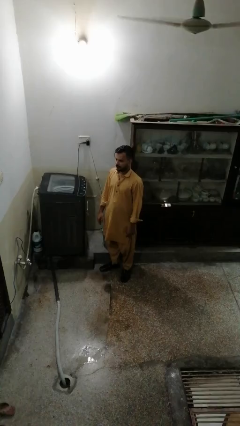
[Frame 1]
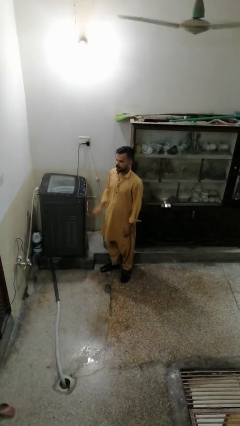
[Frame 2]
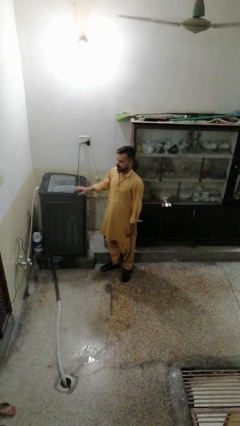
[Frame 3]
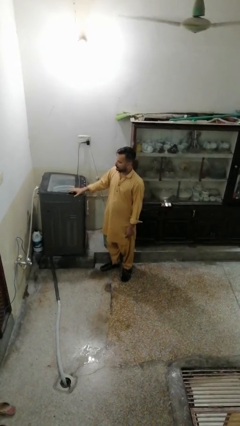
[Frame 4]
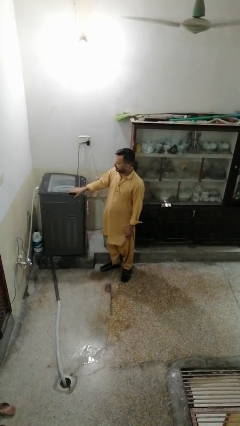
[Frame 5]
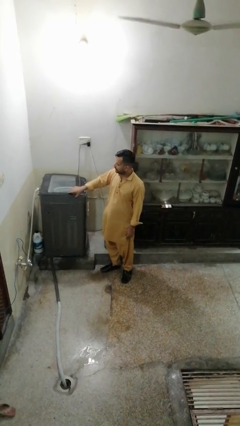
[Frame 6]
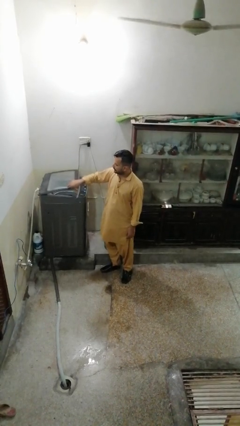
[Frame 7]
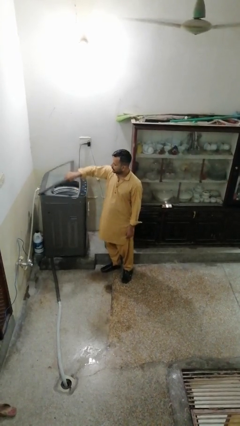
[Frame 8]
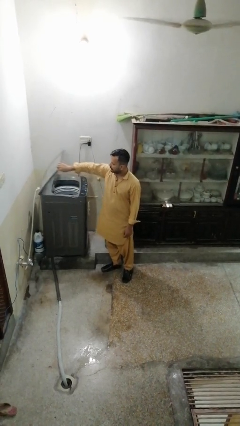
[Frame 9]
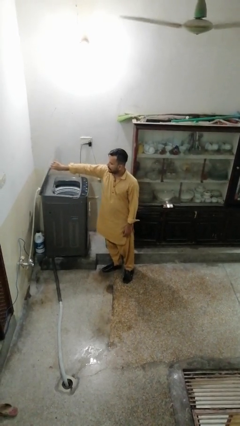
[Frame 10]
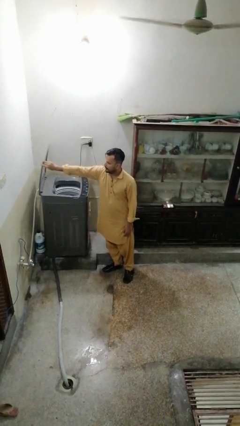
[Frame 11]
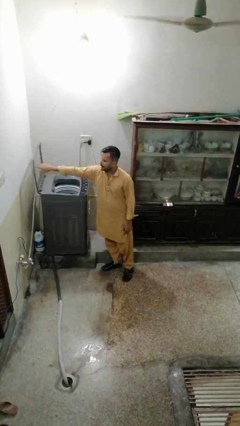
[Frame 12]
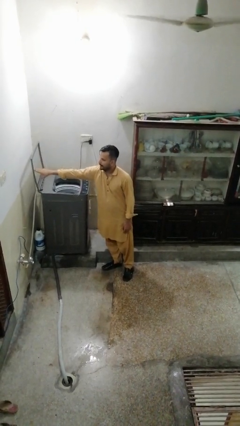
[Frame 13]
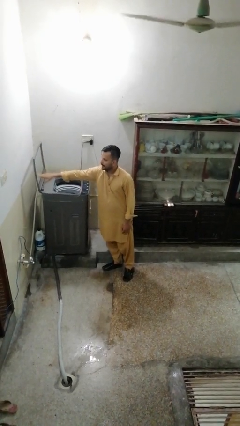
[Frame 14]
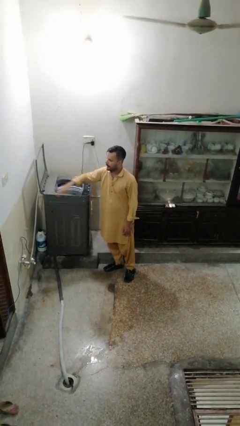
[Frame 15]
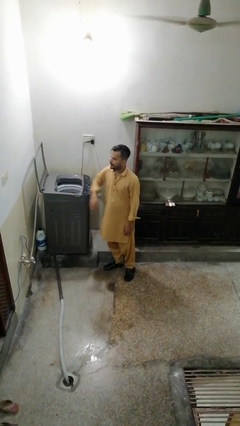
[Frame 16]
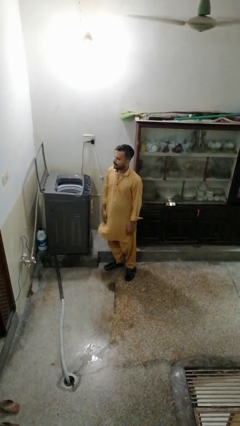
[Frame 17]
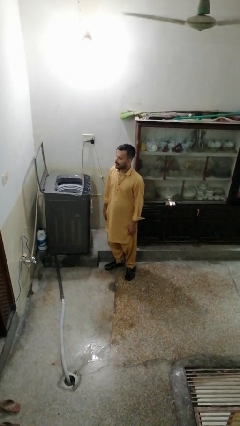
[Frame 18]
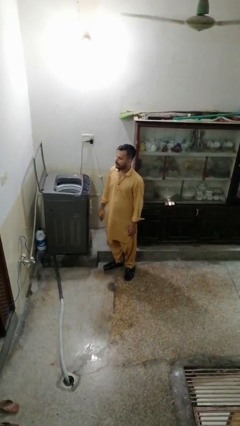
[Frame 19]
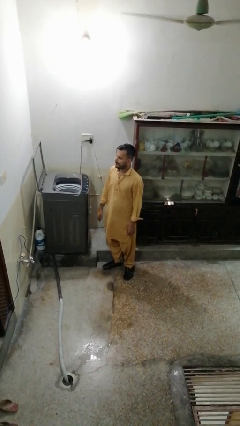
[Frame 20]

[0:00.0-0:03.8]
person opens clothes washer

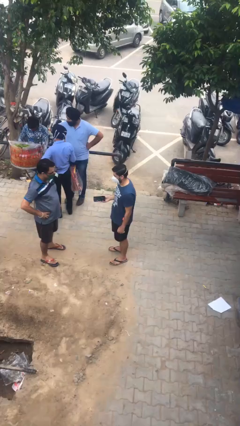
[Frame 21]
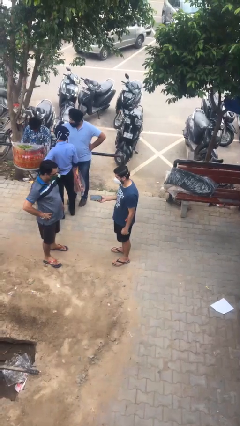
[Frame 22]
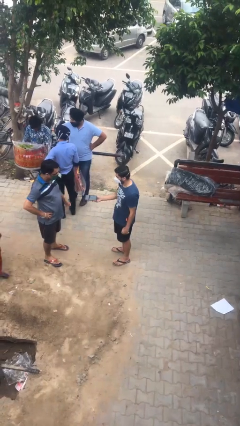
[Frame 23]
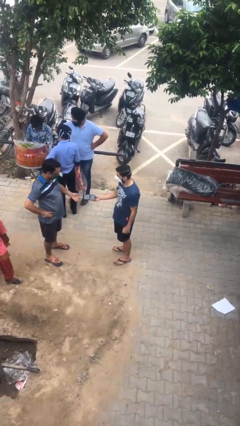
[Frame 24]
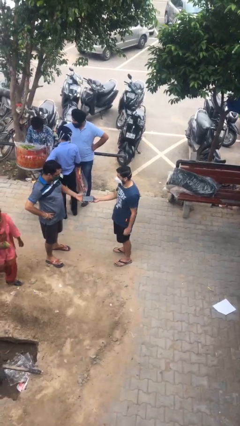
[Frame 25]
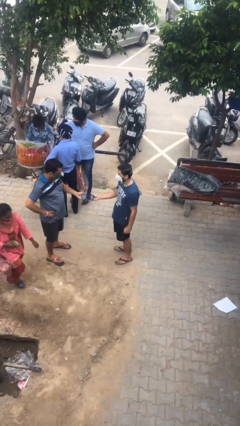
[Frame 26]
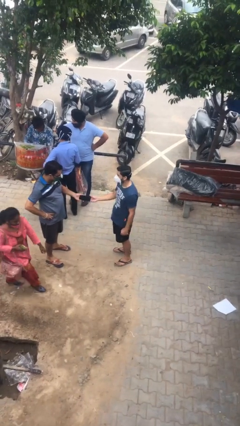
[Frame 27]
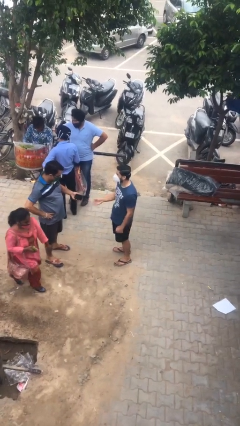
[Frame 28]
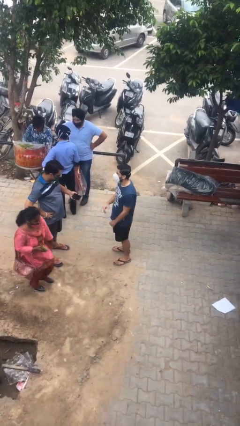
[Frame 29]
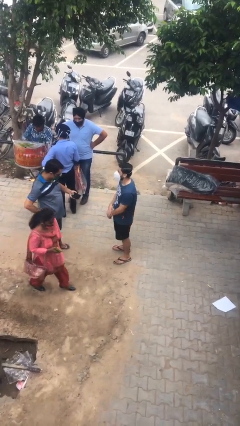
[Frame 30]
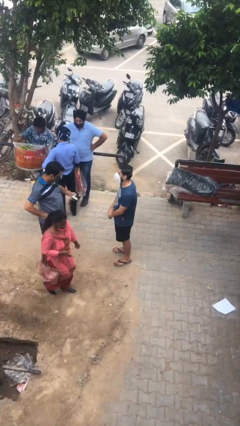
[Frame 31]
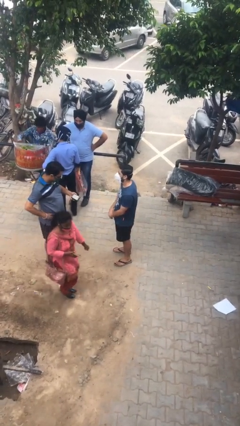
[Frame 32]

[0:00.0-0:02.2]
person transfers object to person

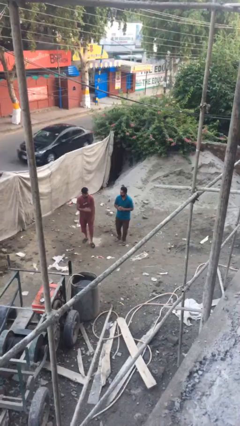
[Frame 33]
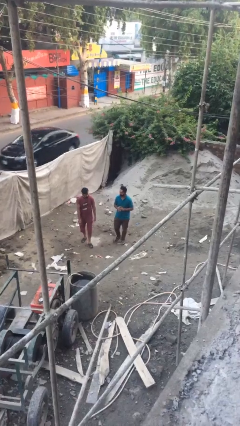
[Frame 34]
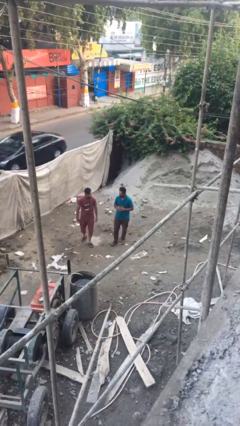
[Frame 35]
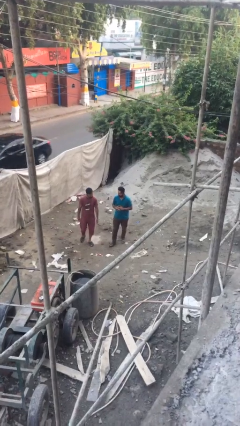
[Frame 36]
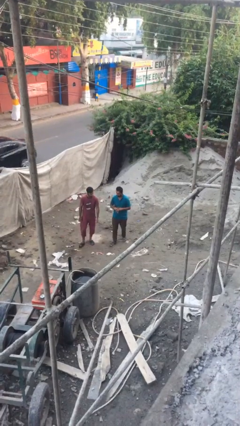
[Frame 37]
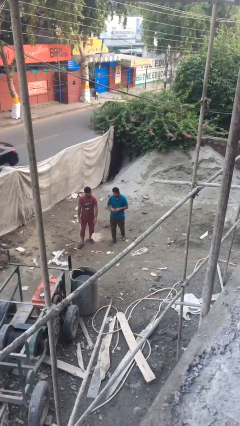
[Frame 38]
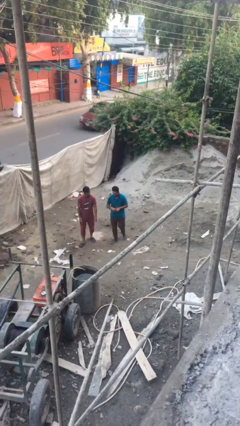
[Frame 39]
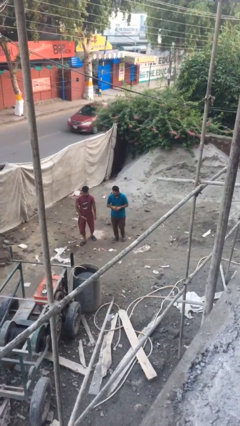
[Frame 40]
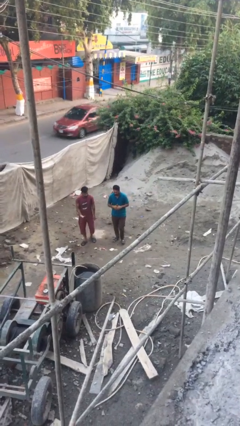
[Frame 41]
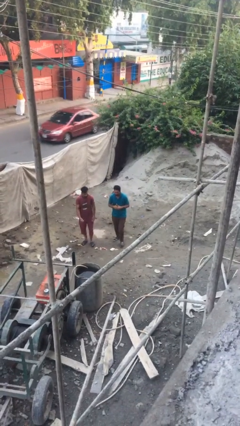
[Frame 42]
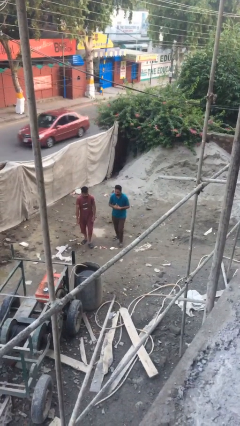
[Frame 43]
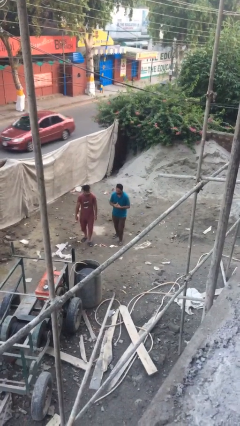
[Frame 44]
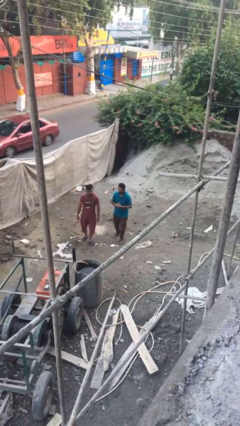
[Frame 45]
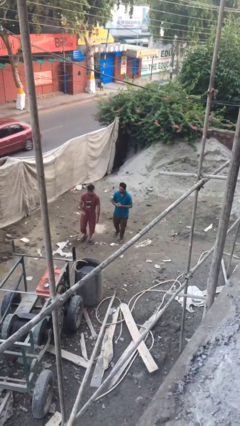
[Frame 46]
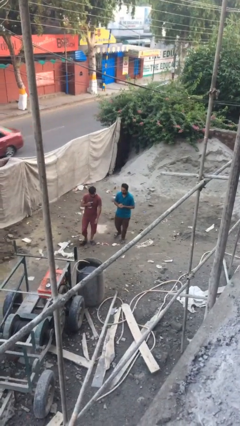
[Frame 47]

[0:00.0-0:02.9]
person talks to person

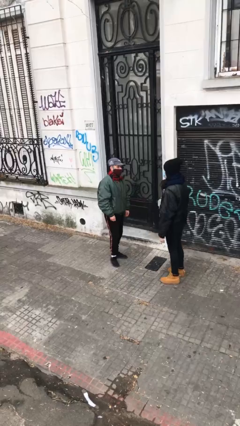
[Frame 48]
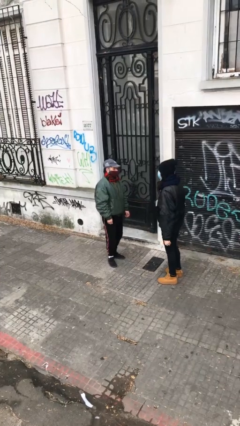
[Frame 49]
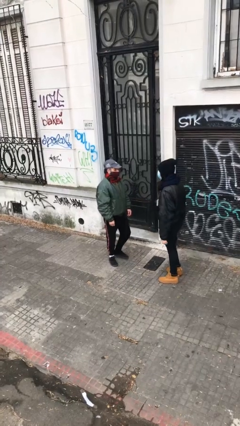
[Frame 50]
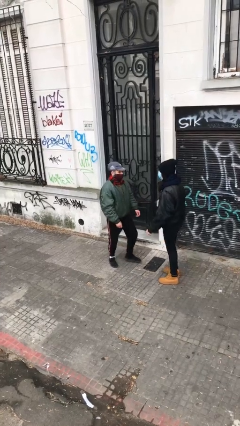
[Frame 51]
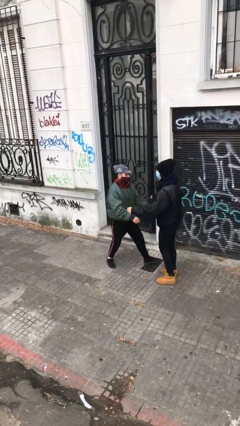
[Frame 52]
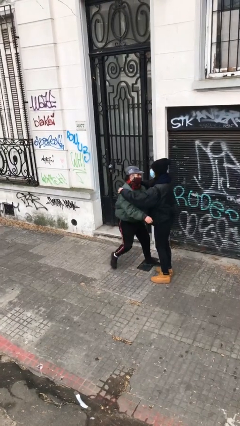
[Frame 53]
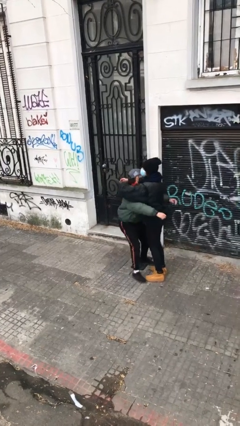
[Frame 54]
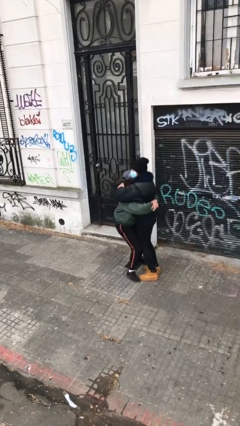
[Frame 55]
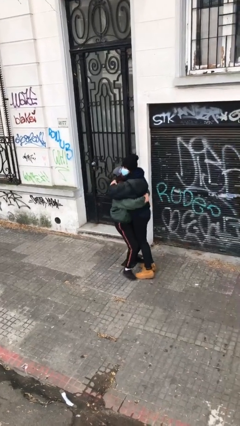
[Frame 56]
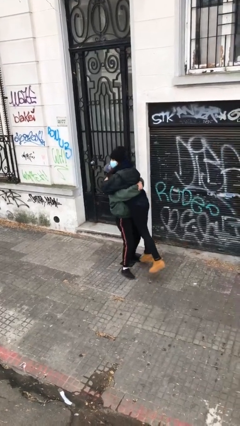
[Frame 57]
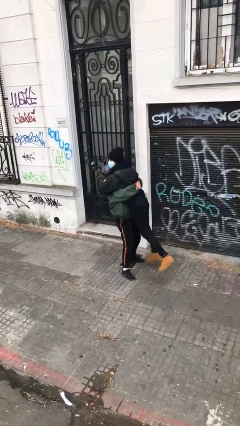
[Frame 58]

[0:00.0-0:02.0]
person picks up person

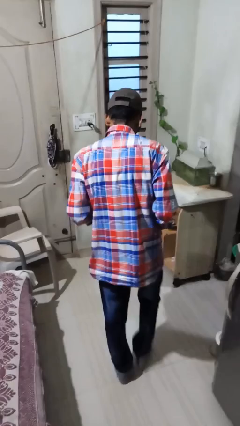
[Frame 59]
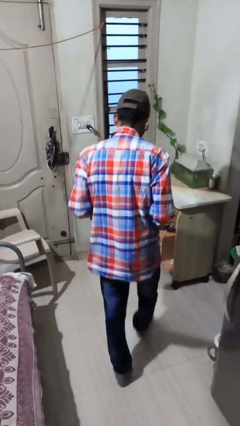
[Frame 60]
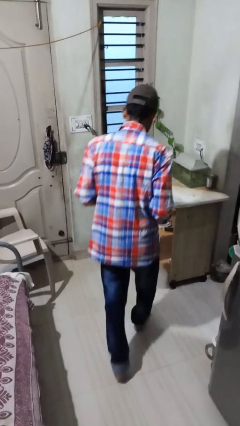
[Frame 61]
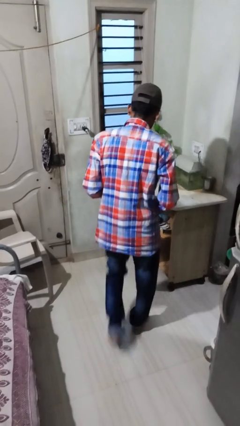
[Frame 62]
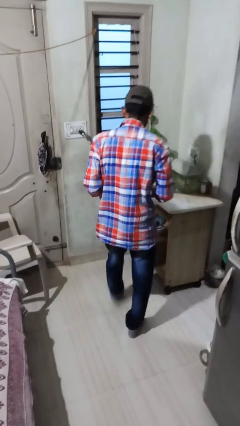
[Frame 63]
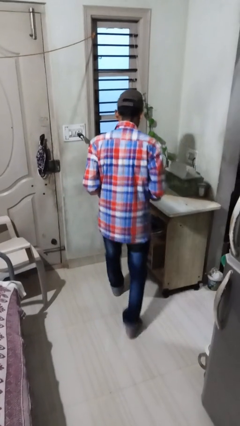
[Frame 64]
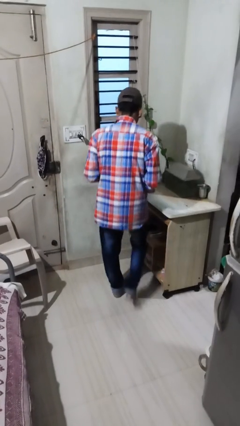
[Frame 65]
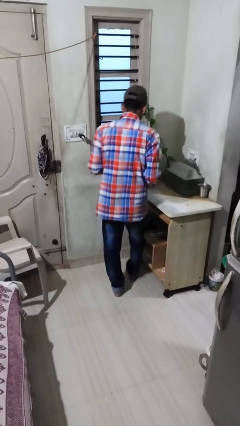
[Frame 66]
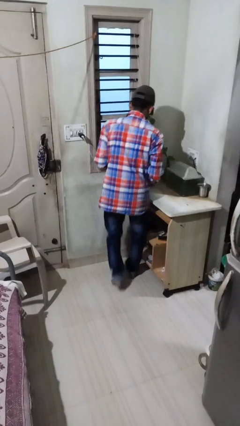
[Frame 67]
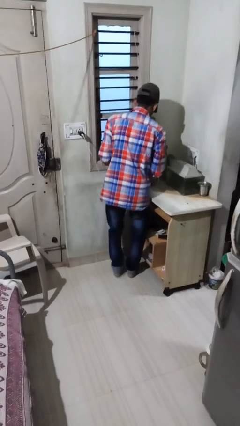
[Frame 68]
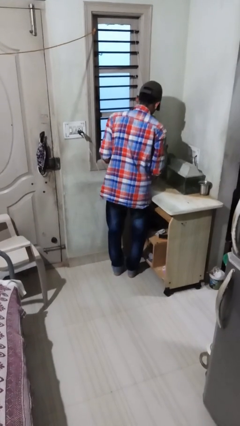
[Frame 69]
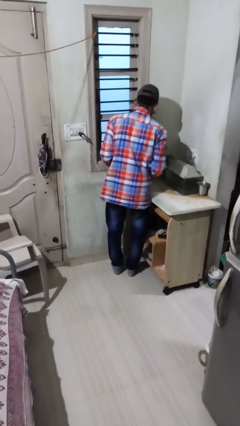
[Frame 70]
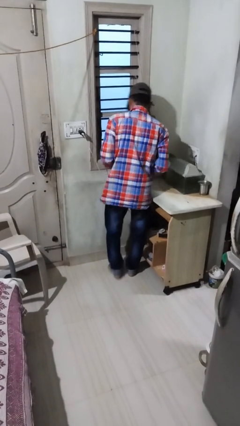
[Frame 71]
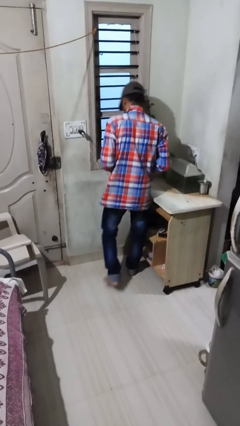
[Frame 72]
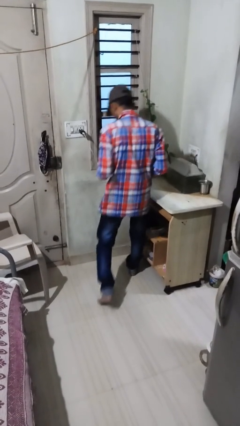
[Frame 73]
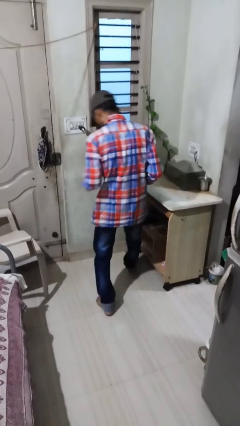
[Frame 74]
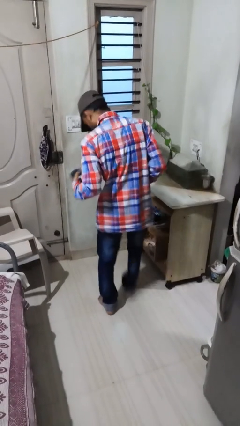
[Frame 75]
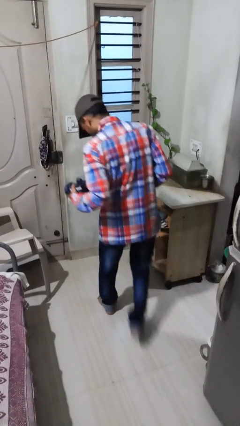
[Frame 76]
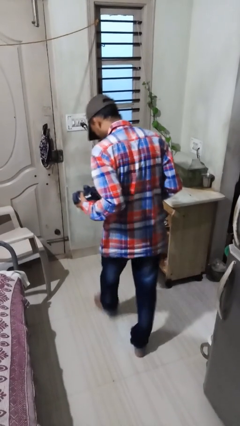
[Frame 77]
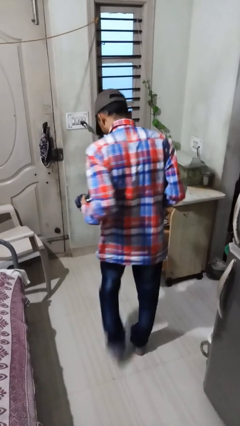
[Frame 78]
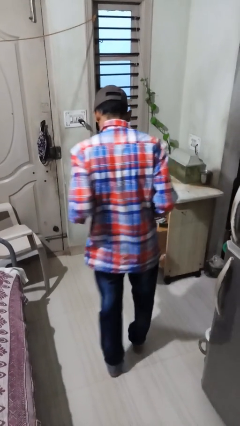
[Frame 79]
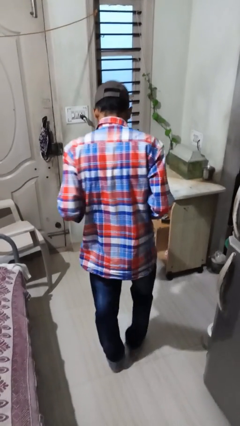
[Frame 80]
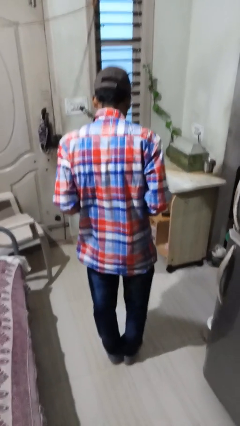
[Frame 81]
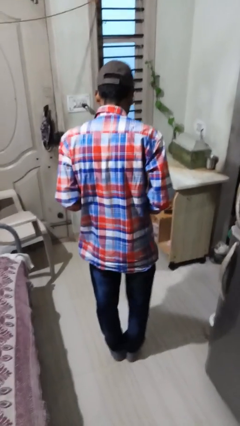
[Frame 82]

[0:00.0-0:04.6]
person picks up object from table

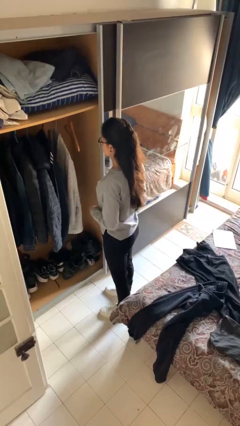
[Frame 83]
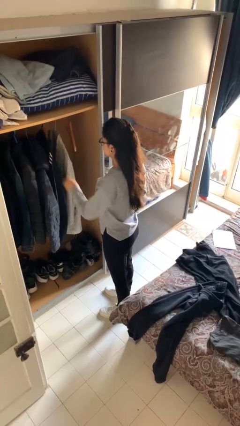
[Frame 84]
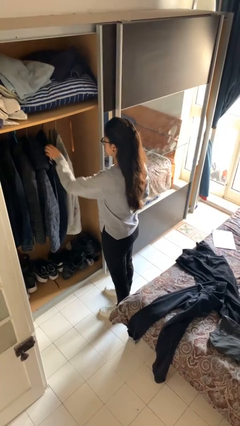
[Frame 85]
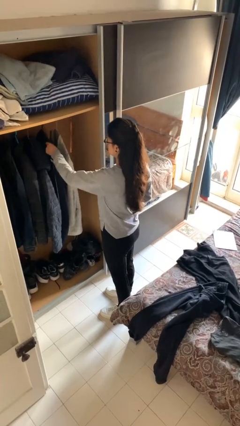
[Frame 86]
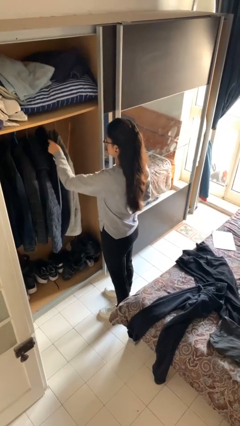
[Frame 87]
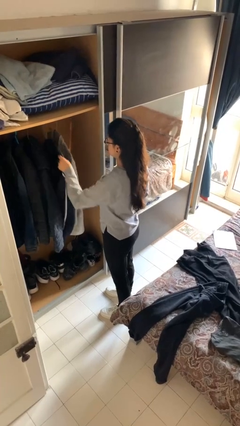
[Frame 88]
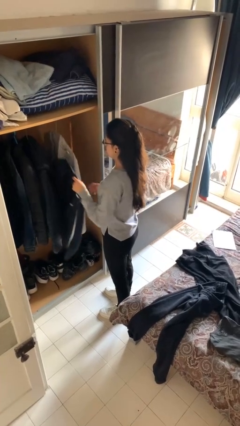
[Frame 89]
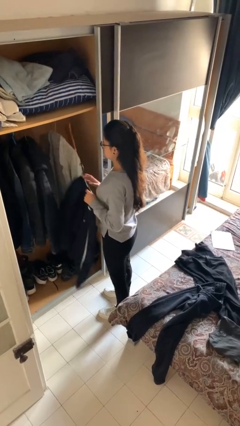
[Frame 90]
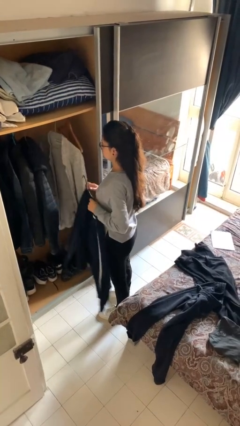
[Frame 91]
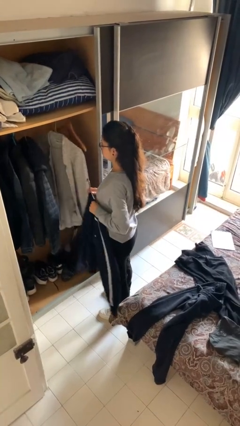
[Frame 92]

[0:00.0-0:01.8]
person takes clothes from closet

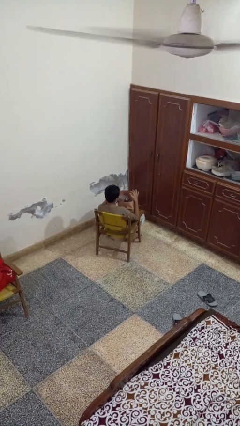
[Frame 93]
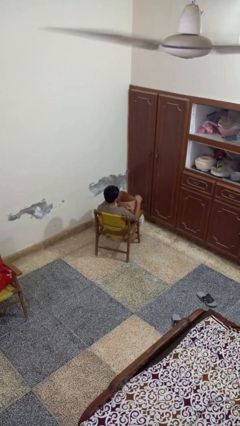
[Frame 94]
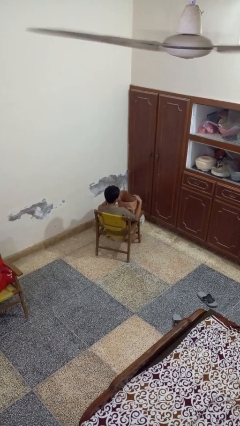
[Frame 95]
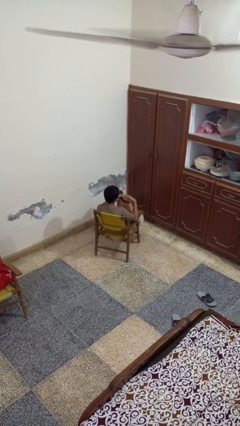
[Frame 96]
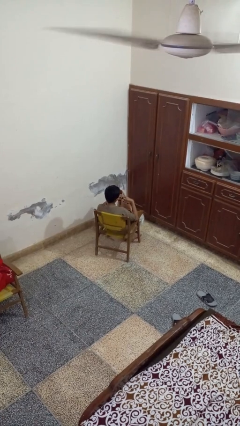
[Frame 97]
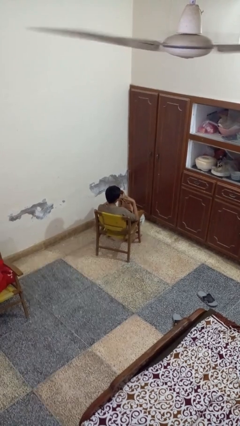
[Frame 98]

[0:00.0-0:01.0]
person puts object into bag
